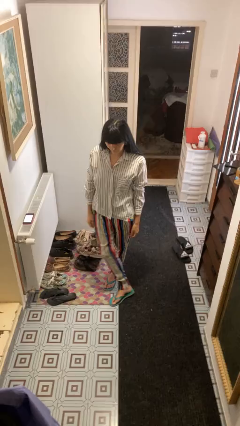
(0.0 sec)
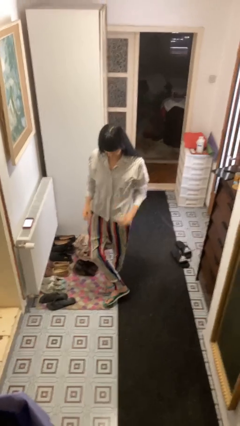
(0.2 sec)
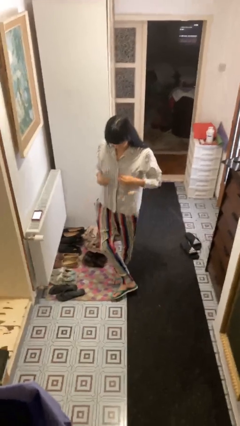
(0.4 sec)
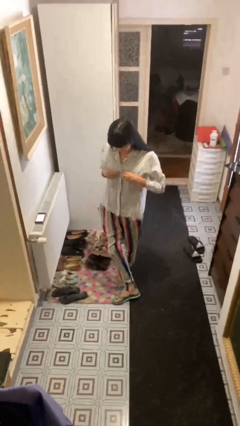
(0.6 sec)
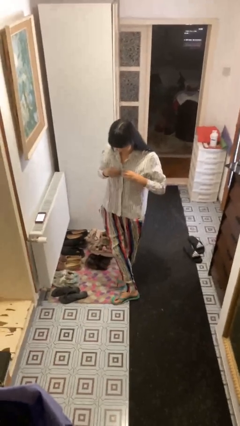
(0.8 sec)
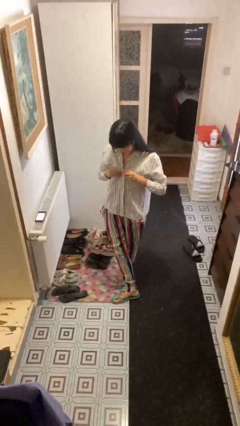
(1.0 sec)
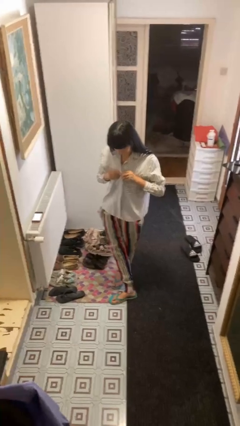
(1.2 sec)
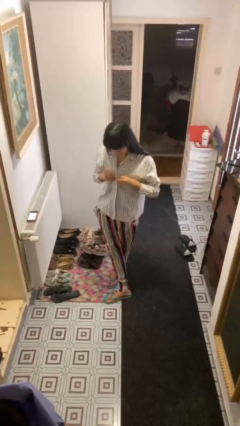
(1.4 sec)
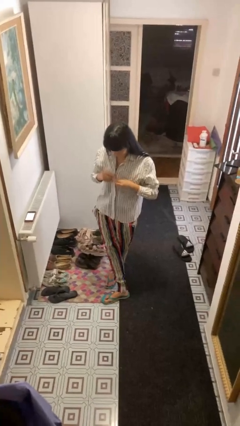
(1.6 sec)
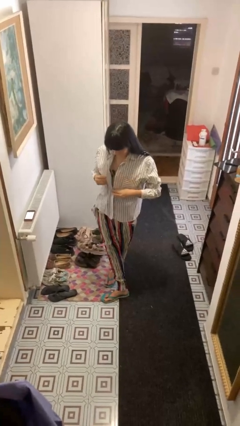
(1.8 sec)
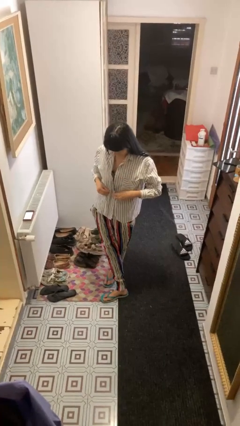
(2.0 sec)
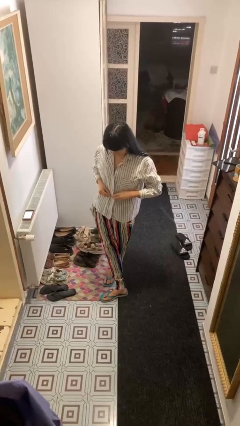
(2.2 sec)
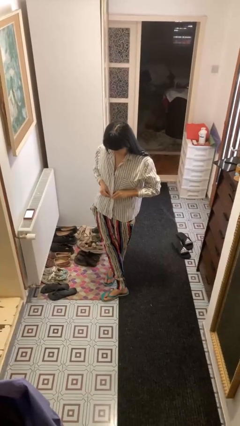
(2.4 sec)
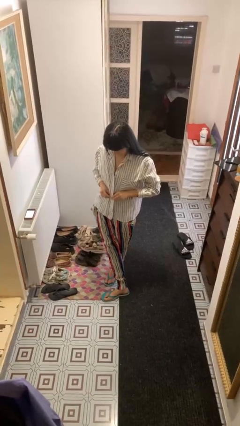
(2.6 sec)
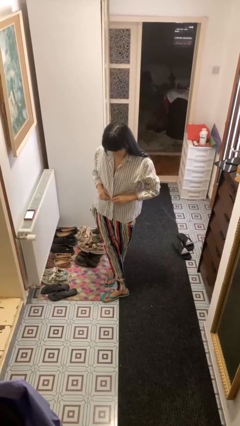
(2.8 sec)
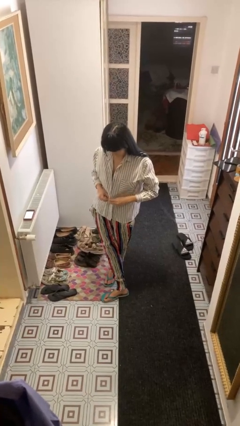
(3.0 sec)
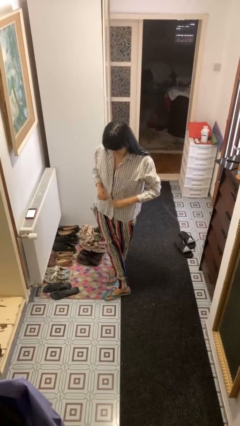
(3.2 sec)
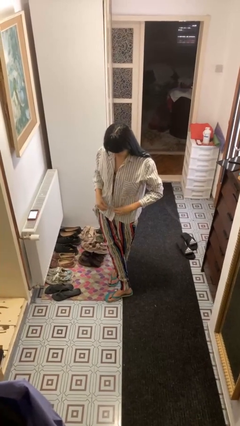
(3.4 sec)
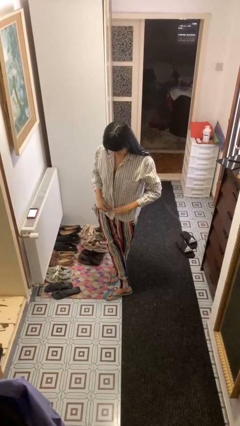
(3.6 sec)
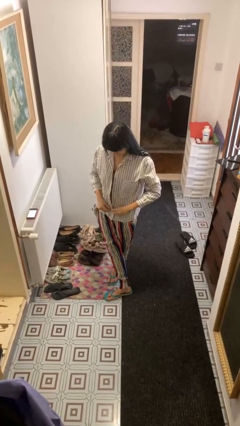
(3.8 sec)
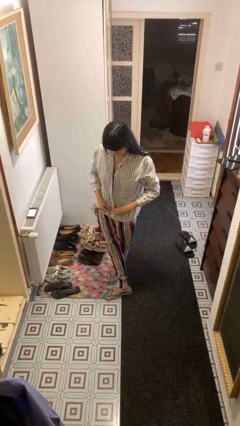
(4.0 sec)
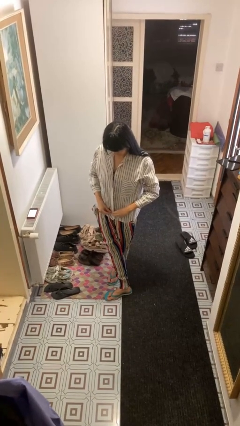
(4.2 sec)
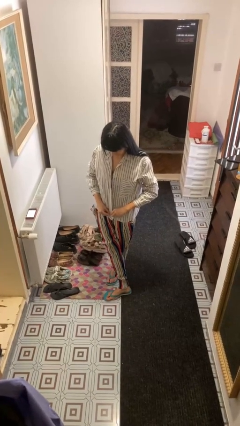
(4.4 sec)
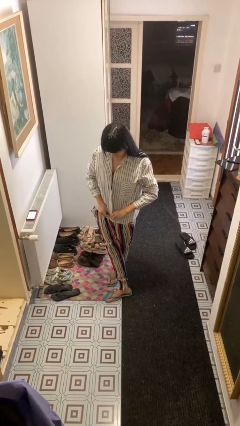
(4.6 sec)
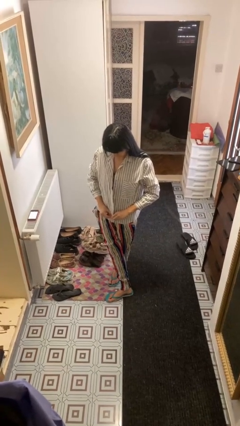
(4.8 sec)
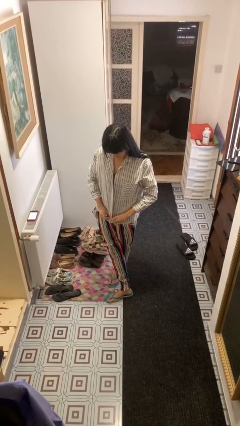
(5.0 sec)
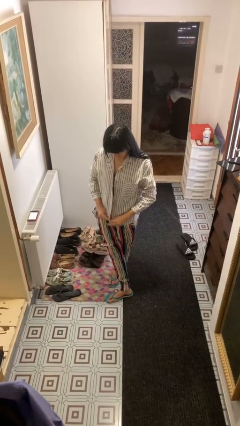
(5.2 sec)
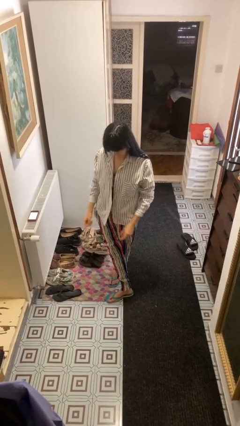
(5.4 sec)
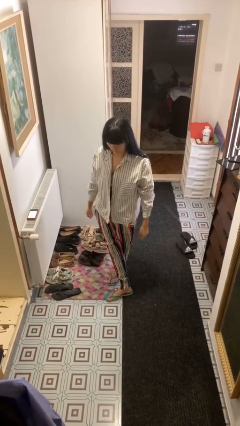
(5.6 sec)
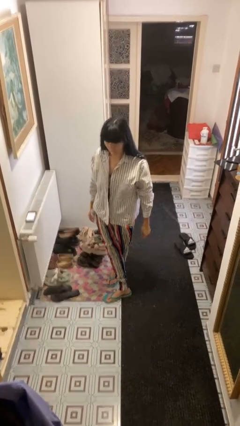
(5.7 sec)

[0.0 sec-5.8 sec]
person unbuttons shirt

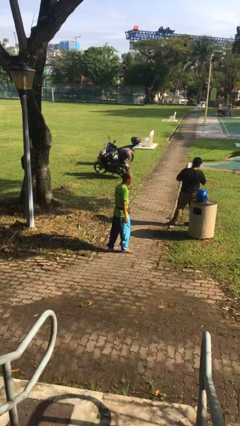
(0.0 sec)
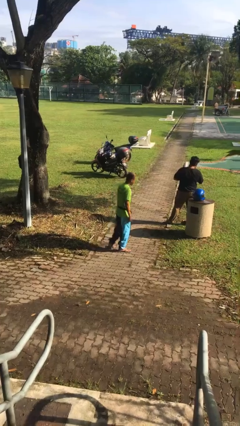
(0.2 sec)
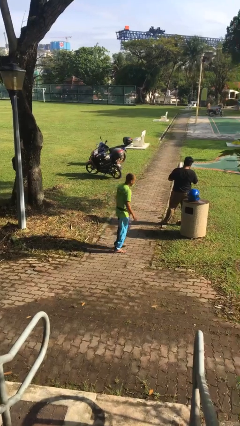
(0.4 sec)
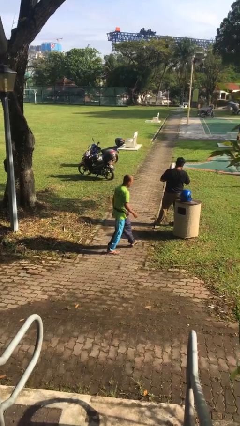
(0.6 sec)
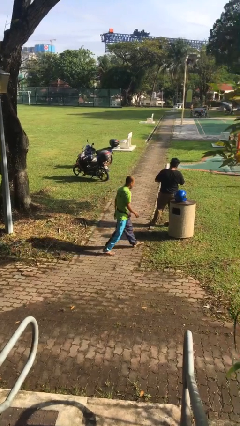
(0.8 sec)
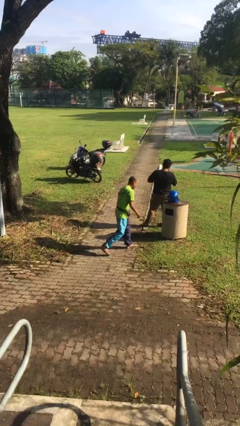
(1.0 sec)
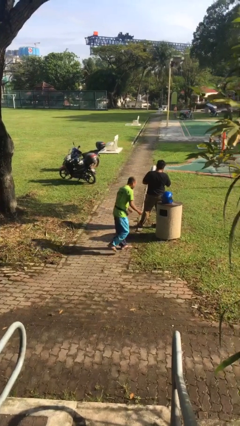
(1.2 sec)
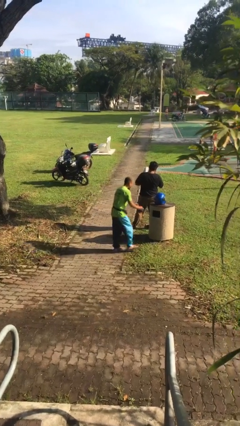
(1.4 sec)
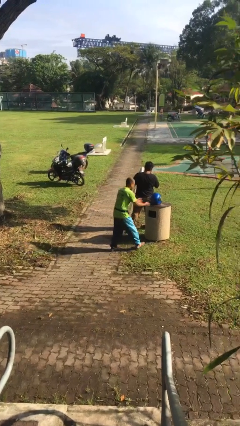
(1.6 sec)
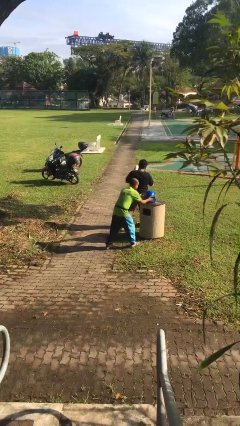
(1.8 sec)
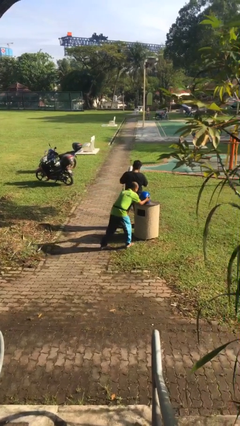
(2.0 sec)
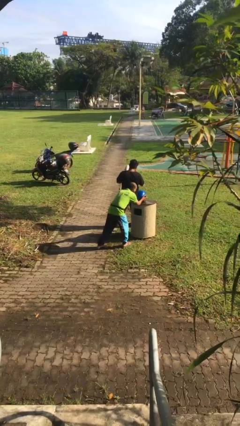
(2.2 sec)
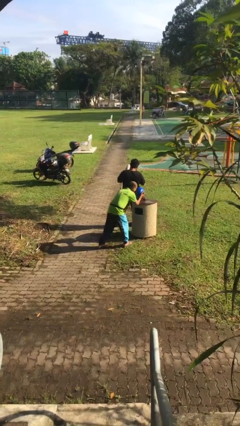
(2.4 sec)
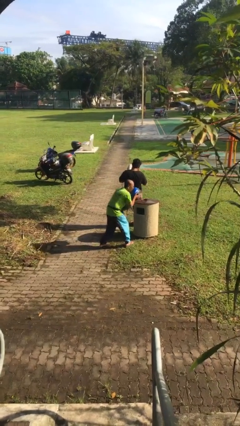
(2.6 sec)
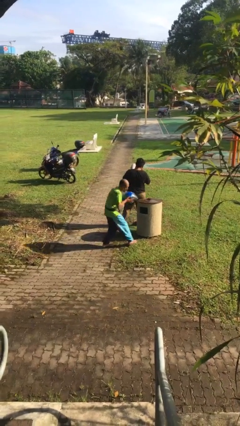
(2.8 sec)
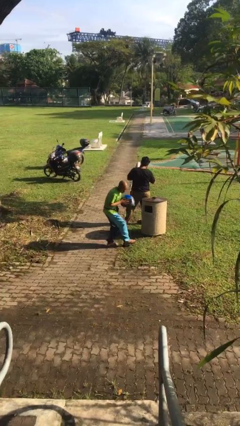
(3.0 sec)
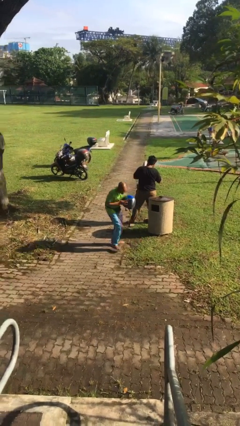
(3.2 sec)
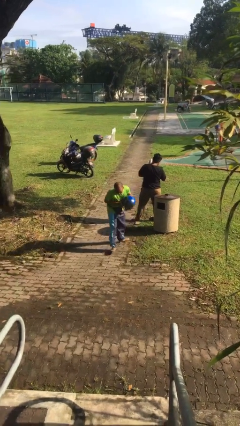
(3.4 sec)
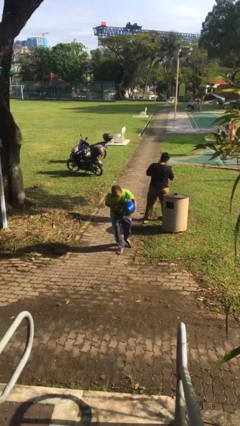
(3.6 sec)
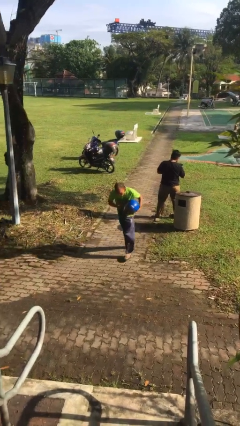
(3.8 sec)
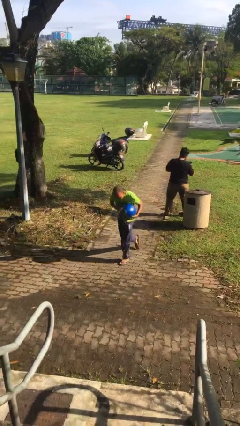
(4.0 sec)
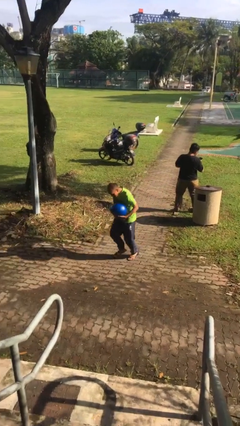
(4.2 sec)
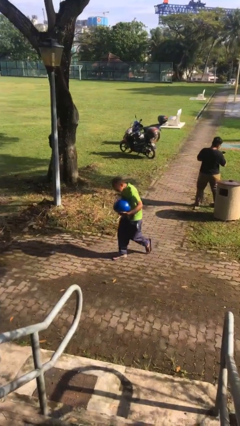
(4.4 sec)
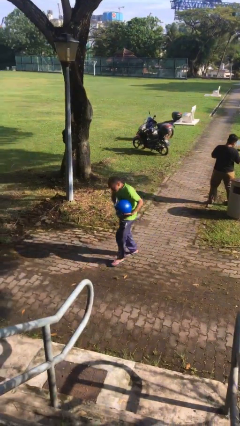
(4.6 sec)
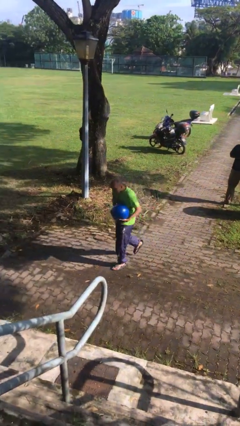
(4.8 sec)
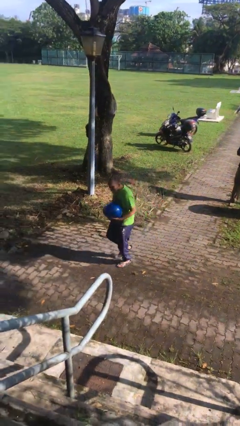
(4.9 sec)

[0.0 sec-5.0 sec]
person steals object from person

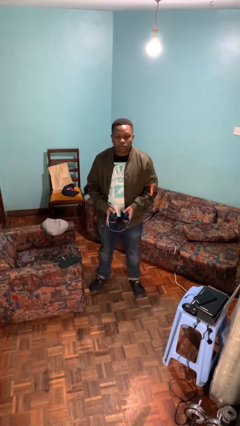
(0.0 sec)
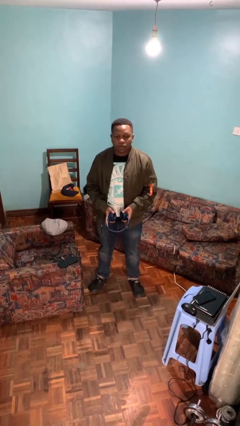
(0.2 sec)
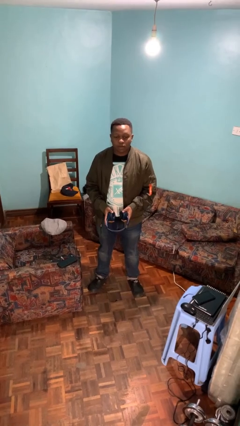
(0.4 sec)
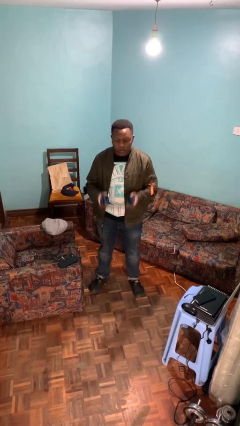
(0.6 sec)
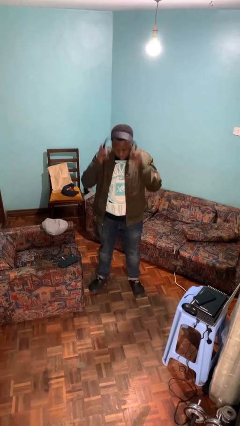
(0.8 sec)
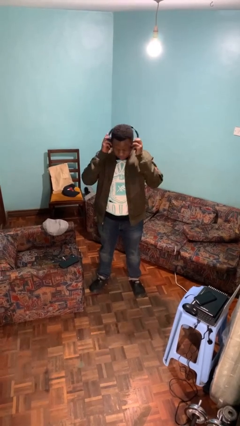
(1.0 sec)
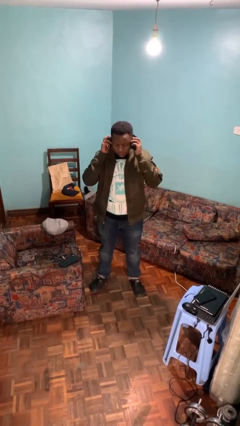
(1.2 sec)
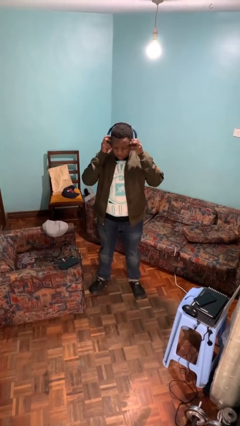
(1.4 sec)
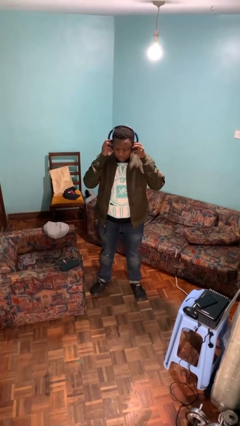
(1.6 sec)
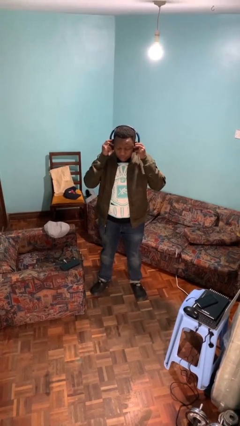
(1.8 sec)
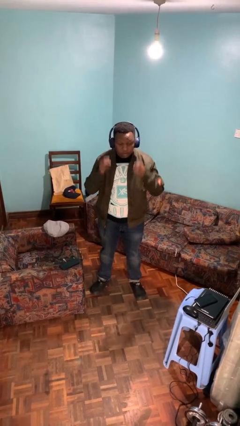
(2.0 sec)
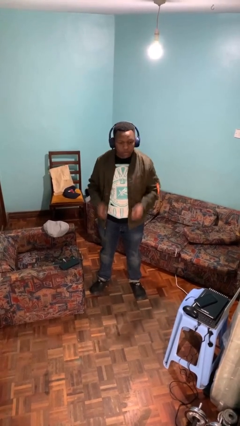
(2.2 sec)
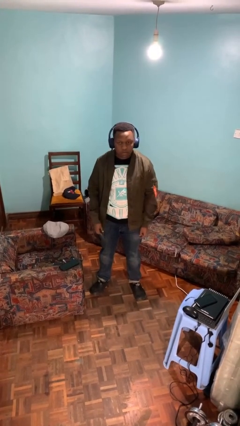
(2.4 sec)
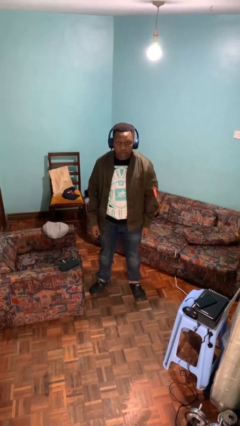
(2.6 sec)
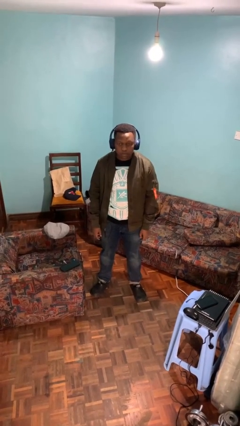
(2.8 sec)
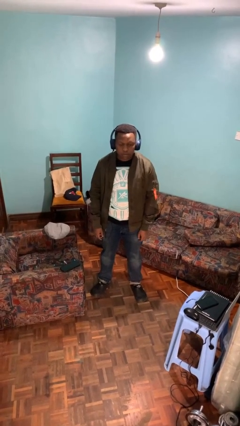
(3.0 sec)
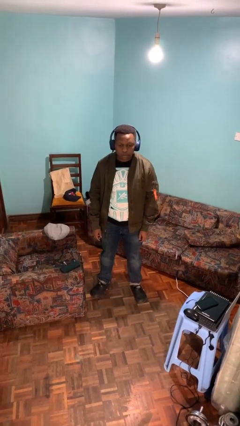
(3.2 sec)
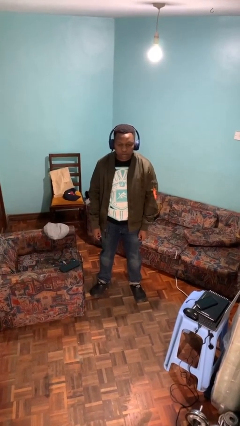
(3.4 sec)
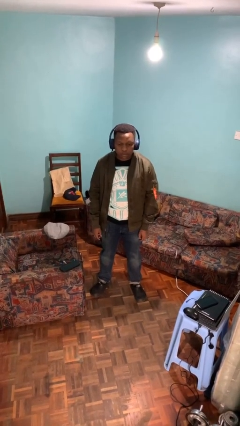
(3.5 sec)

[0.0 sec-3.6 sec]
person puts on headphones

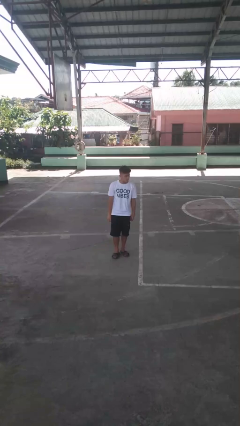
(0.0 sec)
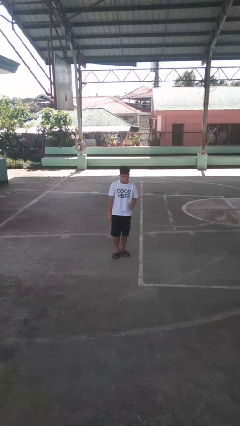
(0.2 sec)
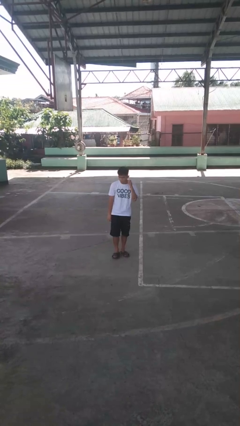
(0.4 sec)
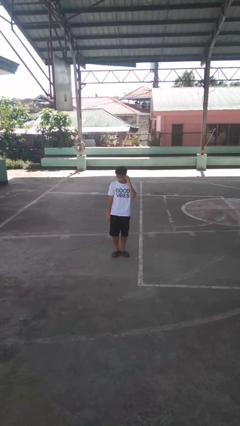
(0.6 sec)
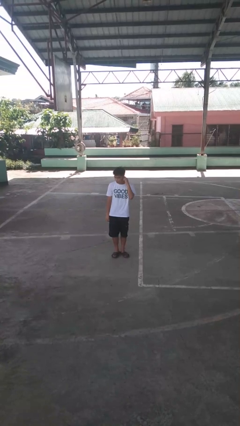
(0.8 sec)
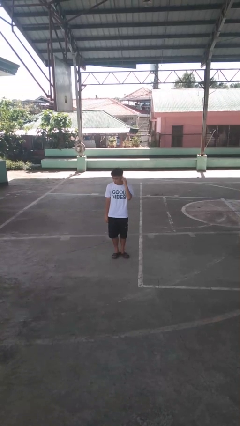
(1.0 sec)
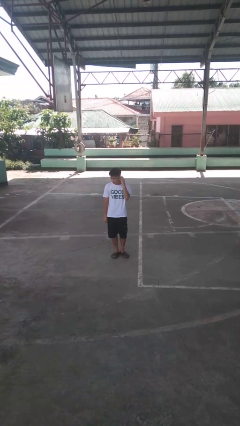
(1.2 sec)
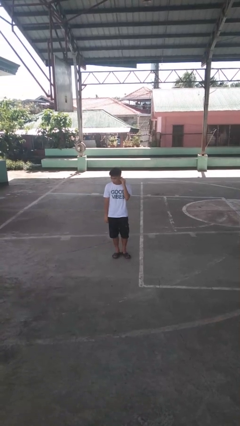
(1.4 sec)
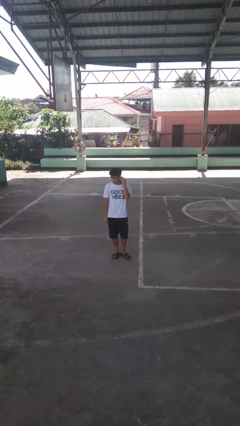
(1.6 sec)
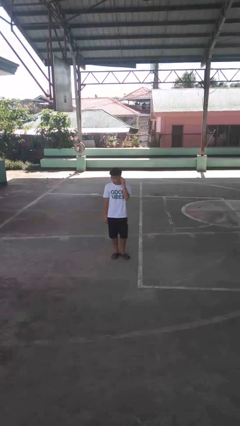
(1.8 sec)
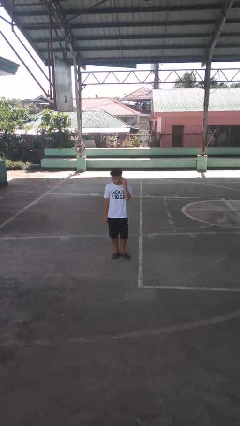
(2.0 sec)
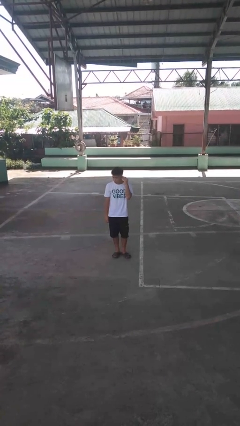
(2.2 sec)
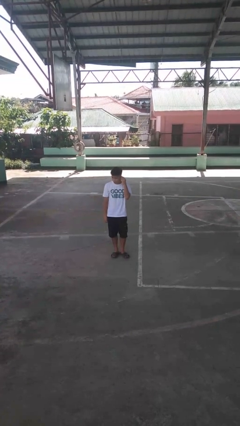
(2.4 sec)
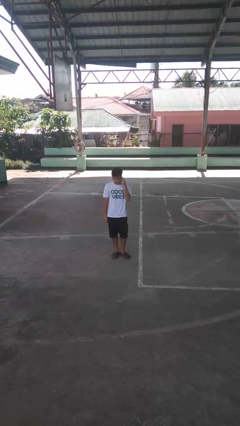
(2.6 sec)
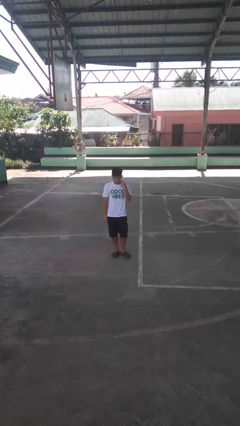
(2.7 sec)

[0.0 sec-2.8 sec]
person touches earlobe
